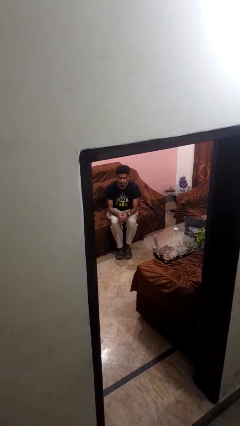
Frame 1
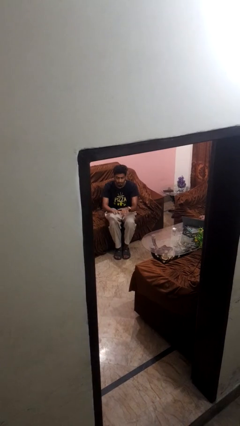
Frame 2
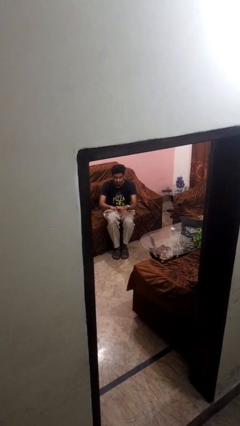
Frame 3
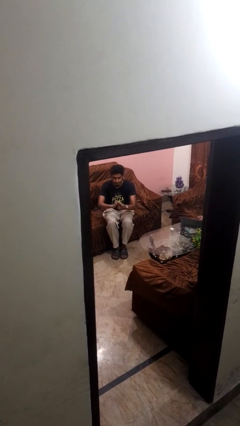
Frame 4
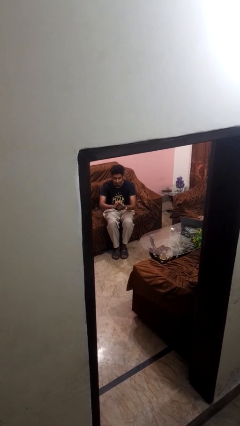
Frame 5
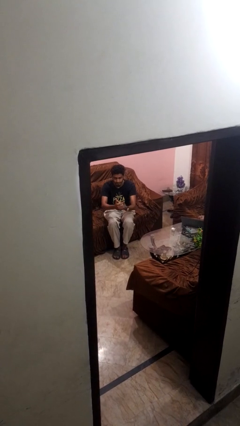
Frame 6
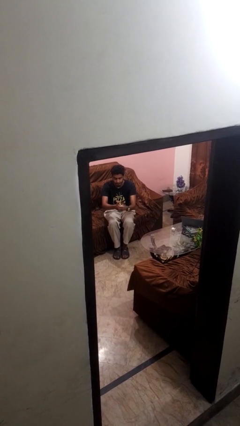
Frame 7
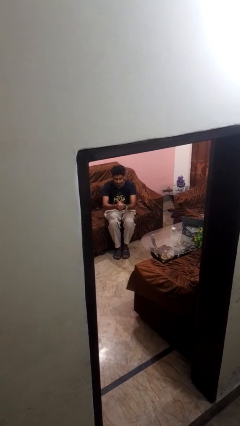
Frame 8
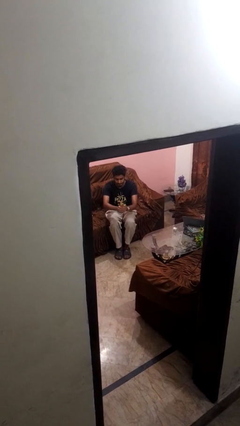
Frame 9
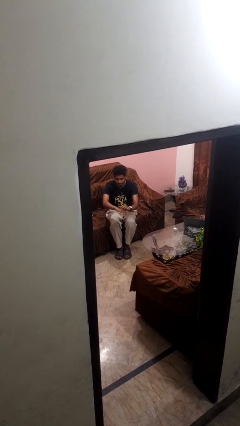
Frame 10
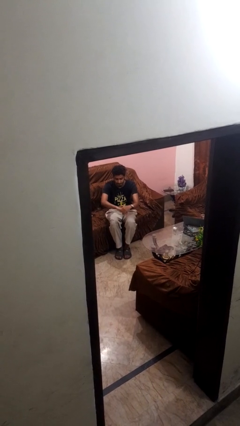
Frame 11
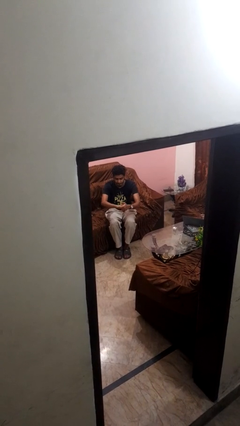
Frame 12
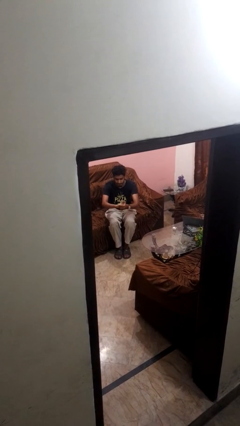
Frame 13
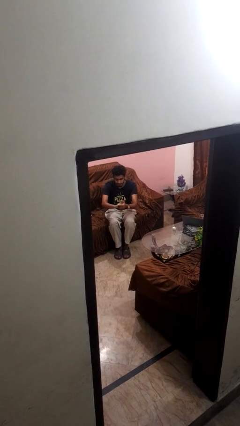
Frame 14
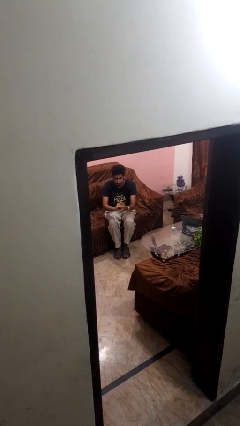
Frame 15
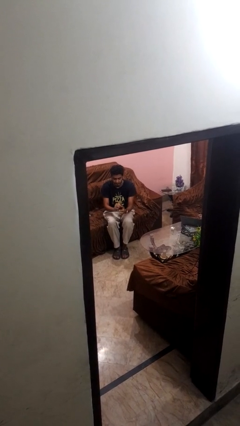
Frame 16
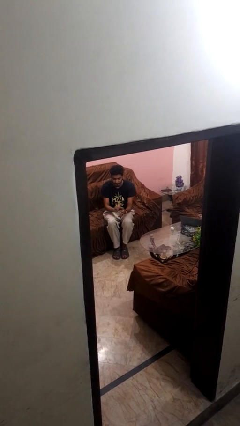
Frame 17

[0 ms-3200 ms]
person cracks knuckles

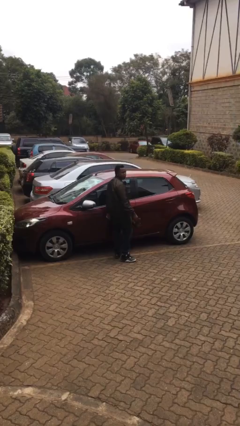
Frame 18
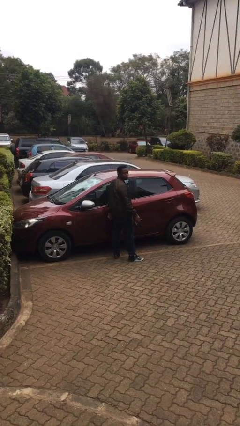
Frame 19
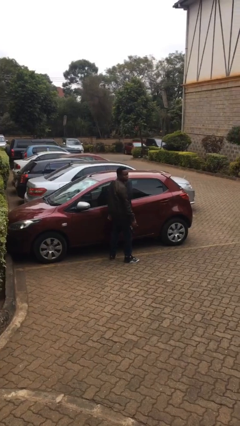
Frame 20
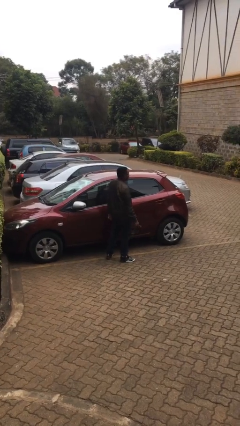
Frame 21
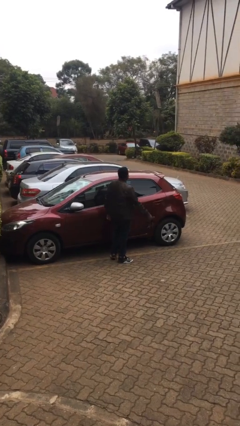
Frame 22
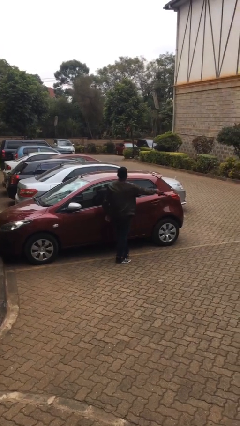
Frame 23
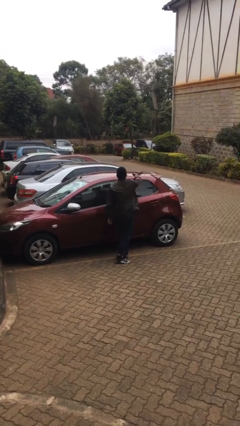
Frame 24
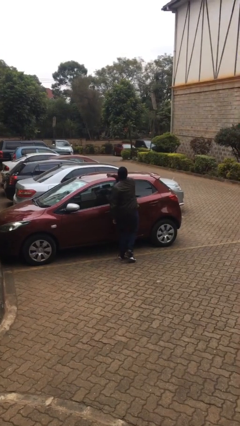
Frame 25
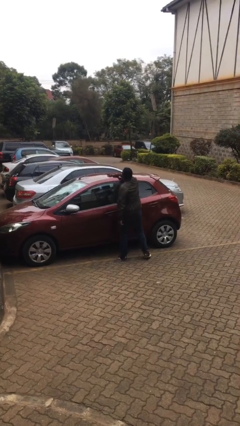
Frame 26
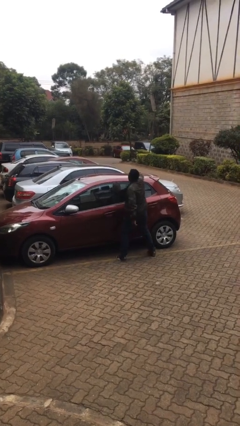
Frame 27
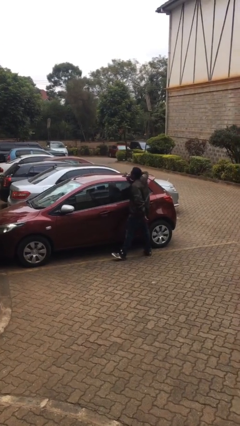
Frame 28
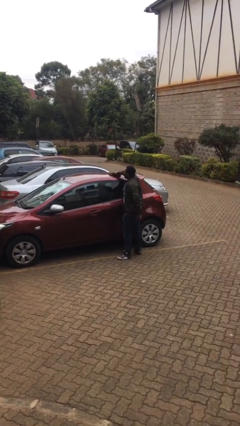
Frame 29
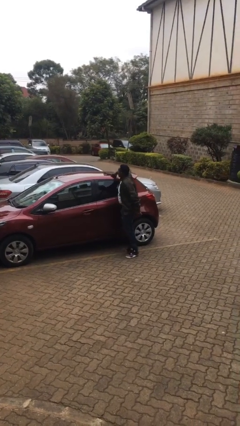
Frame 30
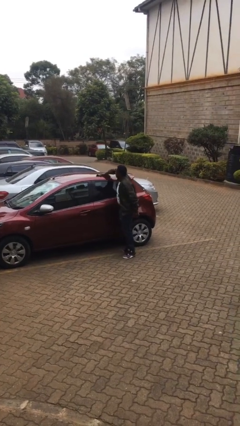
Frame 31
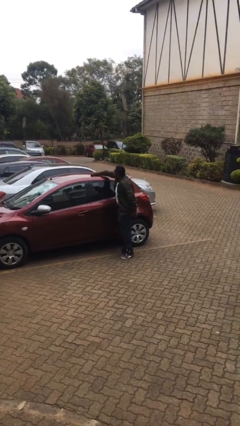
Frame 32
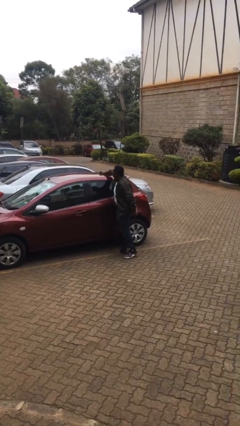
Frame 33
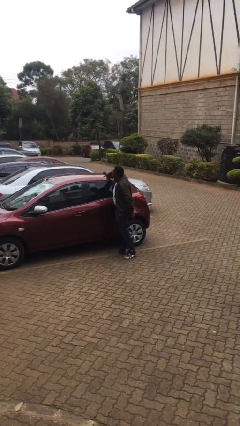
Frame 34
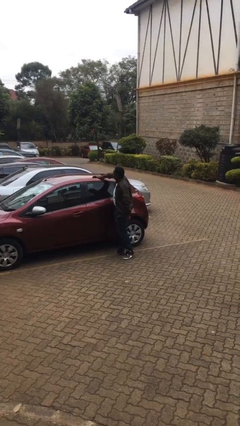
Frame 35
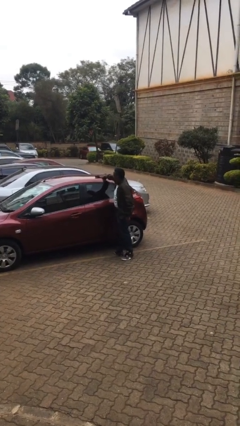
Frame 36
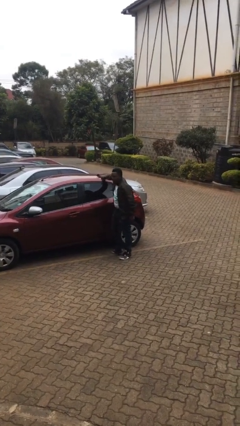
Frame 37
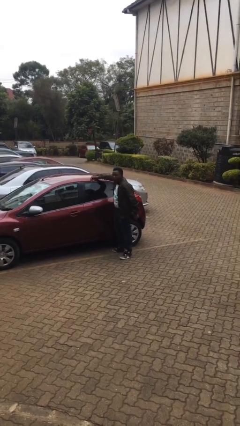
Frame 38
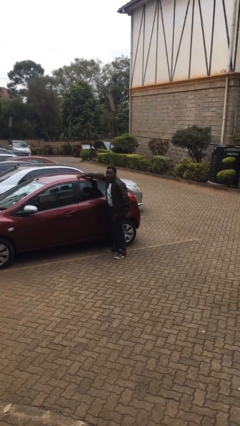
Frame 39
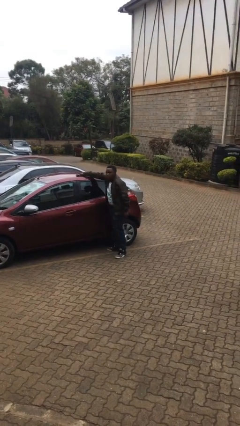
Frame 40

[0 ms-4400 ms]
person polishes car with rag

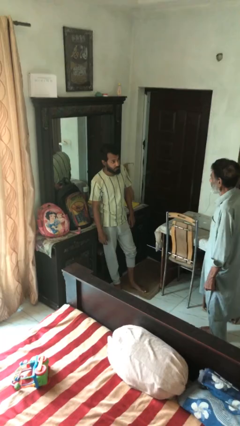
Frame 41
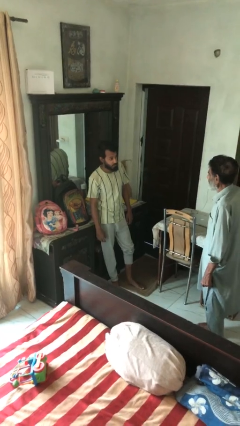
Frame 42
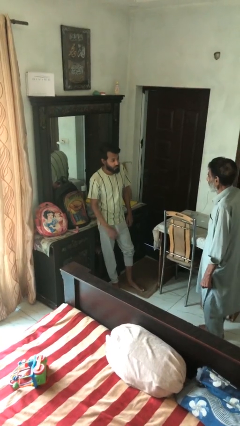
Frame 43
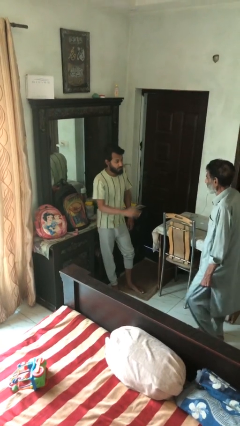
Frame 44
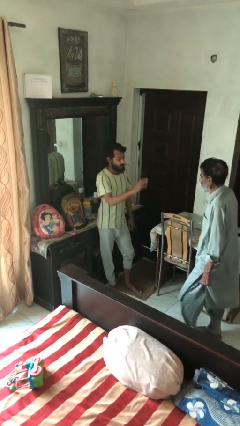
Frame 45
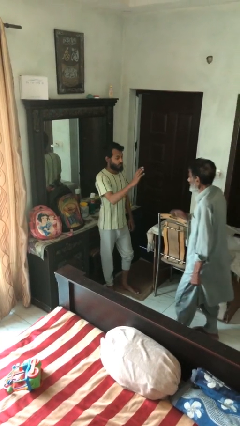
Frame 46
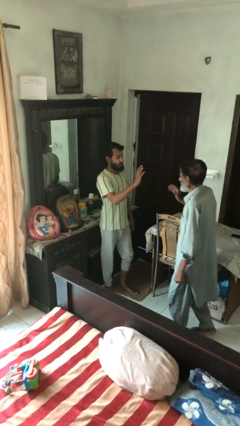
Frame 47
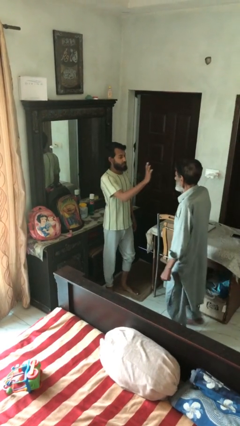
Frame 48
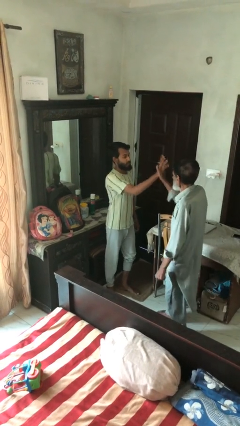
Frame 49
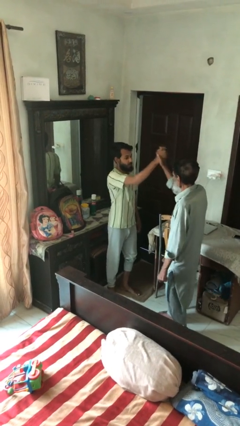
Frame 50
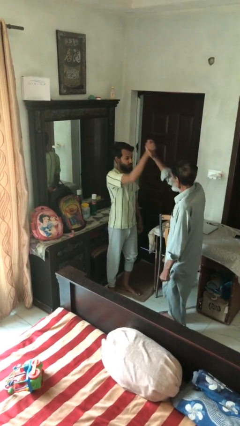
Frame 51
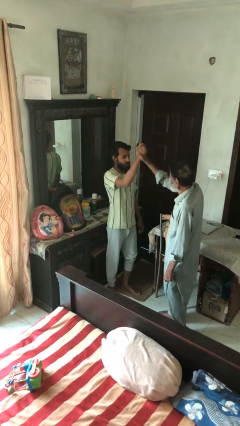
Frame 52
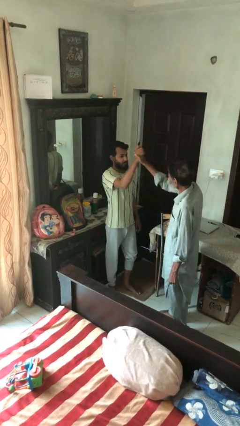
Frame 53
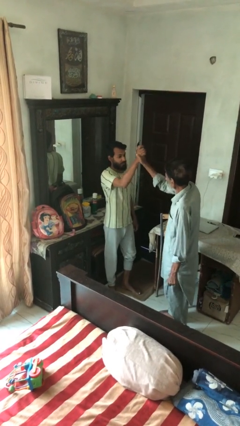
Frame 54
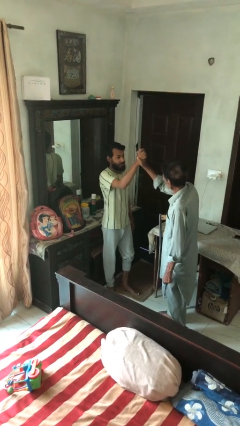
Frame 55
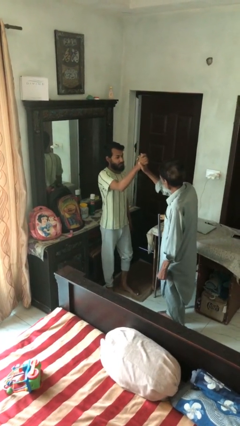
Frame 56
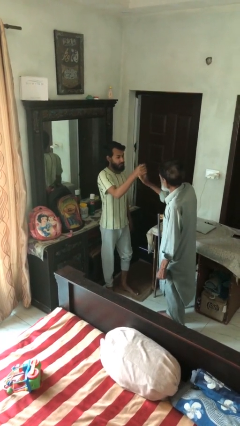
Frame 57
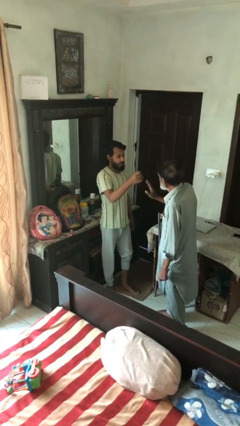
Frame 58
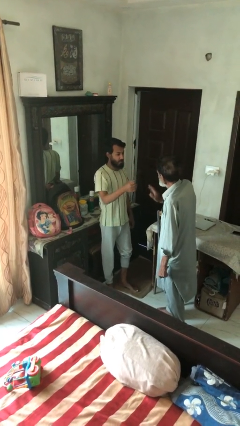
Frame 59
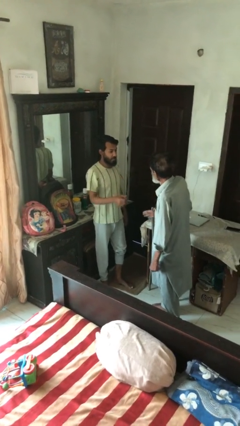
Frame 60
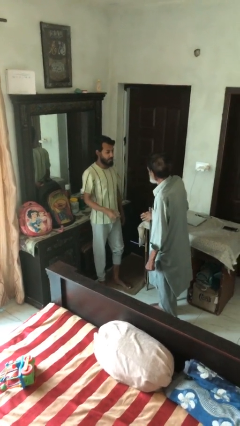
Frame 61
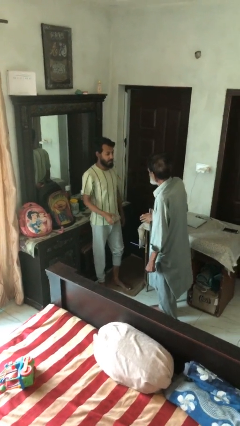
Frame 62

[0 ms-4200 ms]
person highfives hand

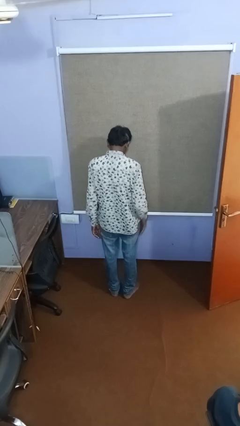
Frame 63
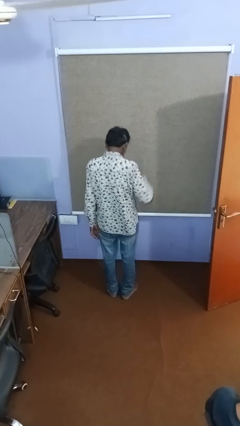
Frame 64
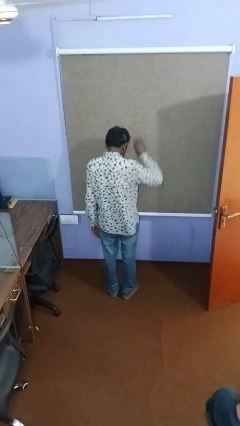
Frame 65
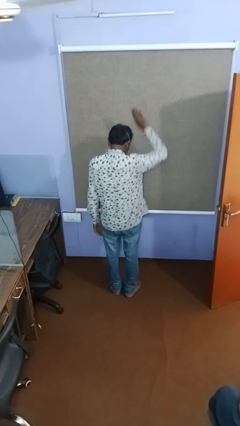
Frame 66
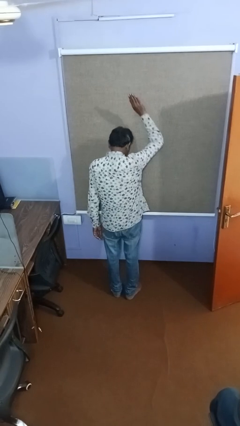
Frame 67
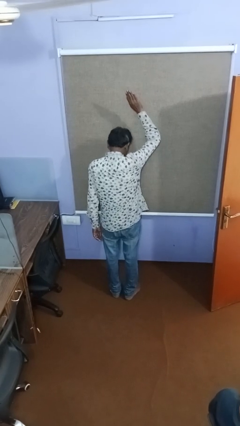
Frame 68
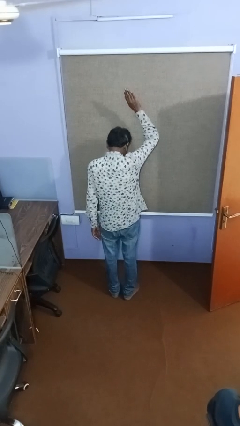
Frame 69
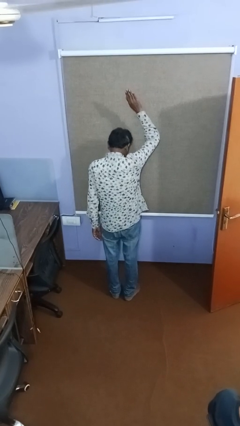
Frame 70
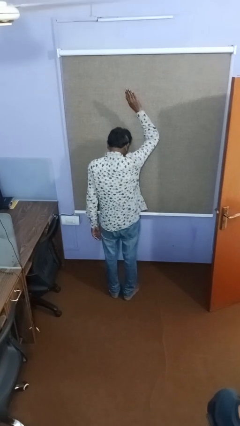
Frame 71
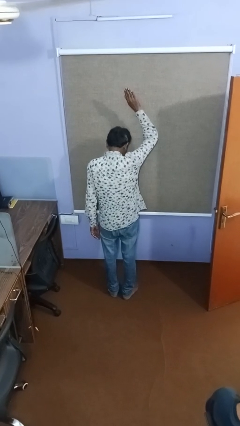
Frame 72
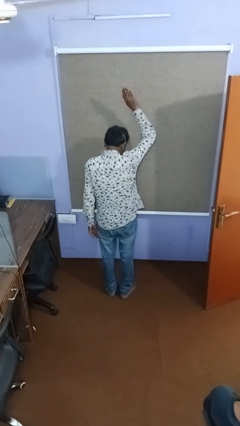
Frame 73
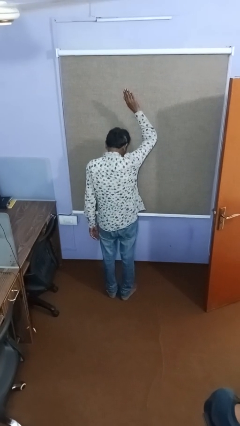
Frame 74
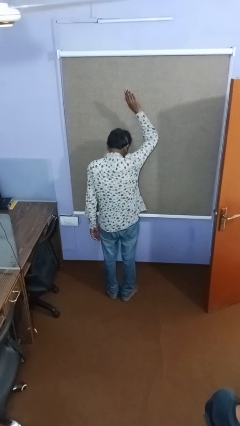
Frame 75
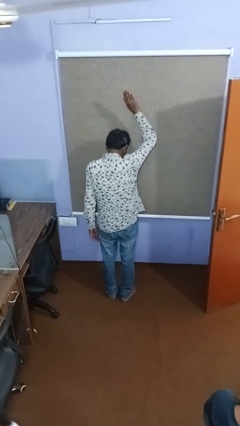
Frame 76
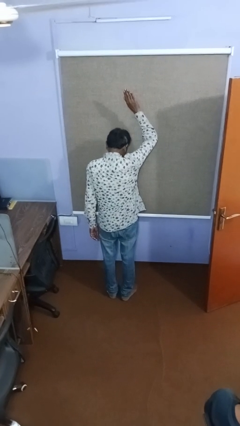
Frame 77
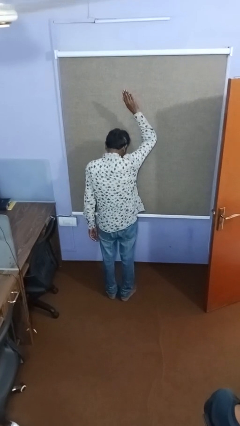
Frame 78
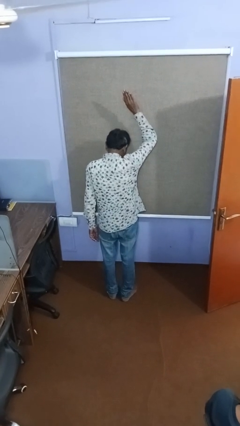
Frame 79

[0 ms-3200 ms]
person gestures raise hand

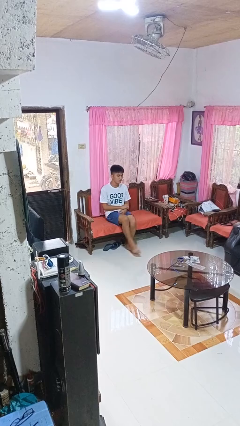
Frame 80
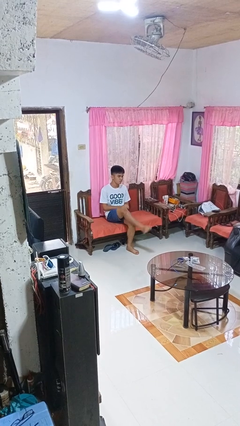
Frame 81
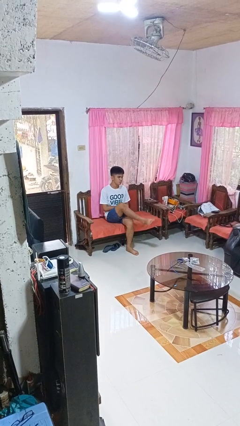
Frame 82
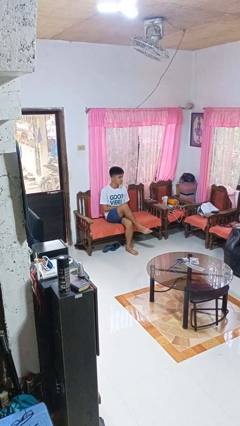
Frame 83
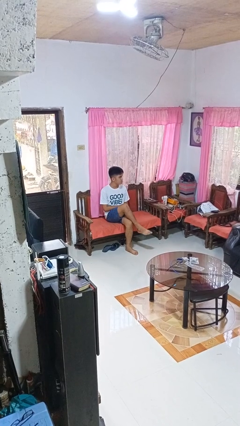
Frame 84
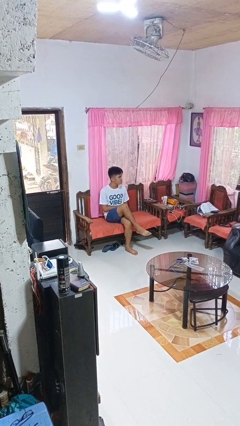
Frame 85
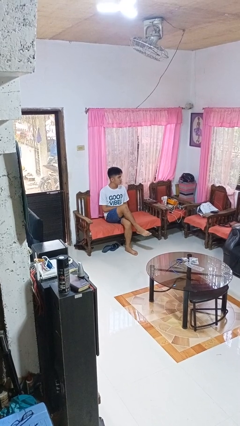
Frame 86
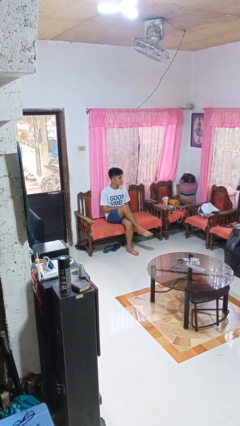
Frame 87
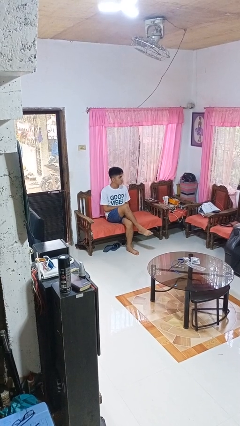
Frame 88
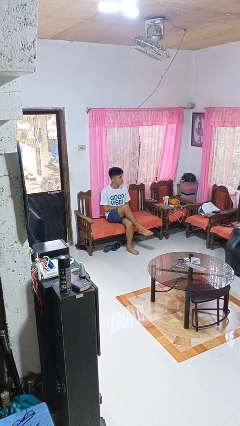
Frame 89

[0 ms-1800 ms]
person crosses legs

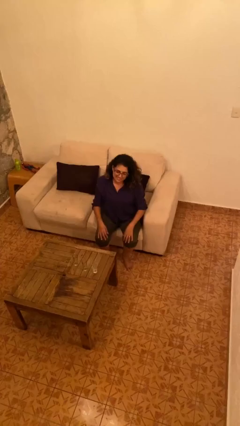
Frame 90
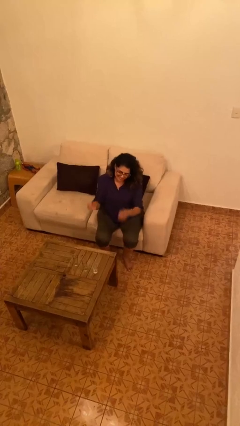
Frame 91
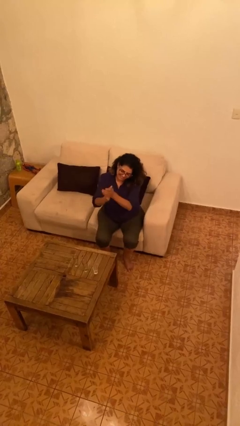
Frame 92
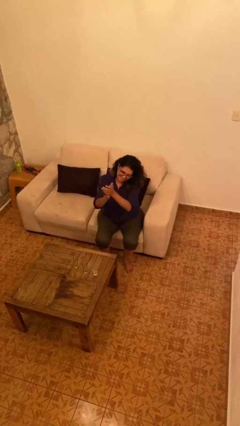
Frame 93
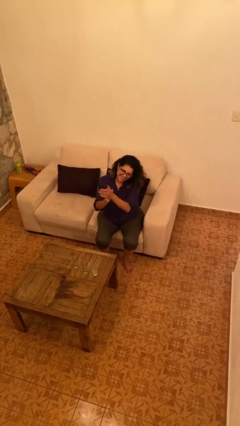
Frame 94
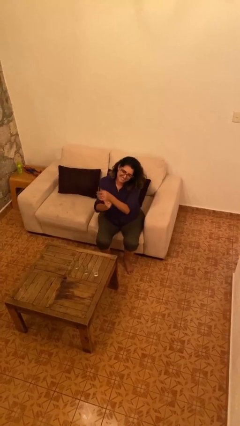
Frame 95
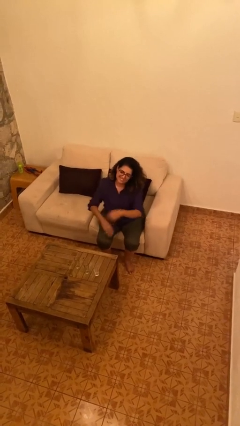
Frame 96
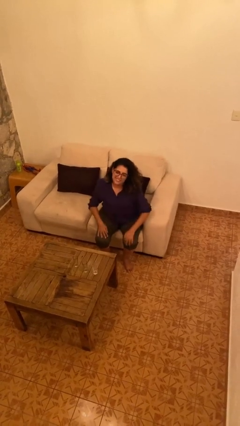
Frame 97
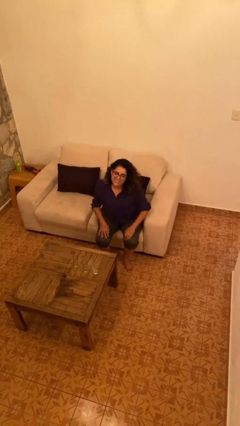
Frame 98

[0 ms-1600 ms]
person claps hands
